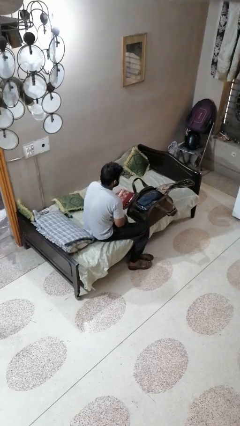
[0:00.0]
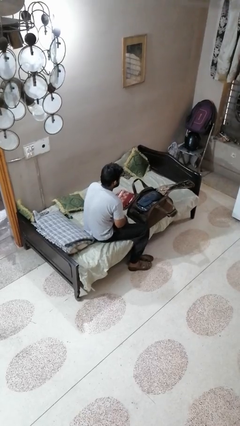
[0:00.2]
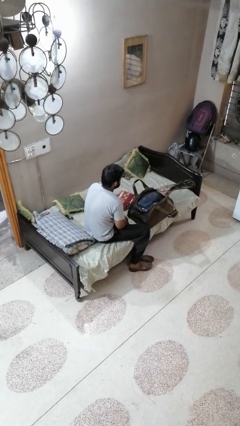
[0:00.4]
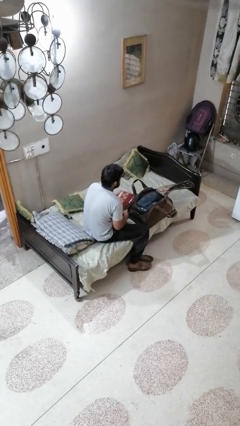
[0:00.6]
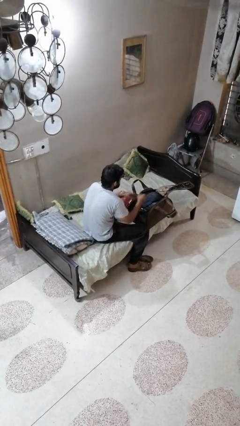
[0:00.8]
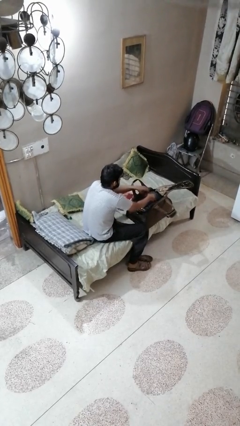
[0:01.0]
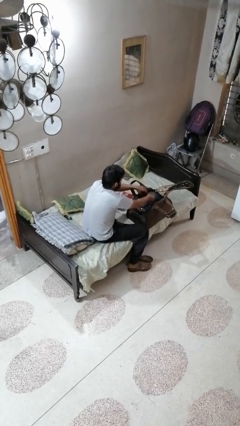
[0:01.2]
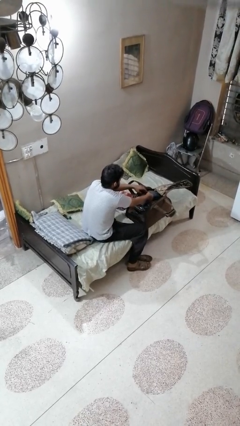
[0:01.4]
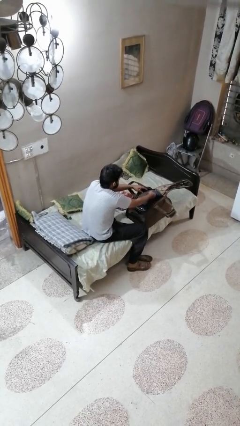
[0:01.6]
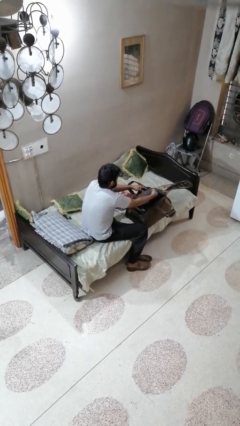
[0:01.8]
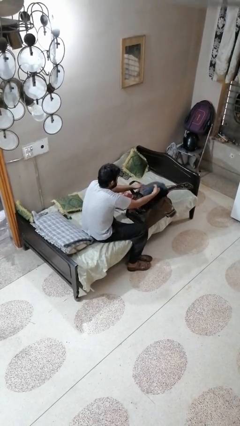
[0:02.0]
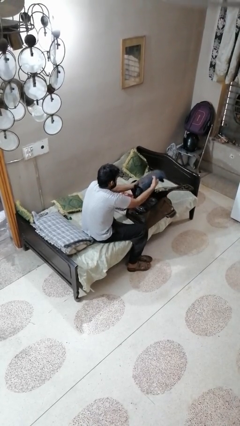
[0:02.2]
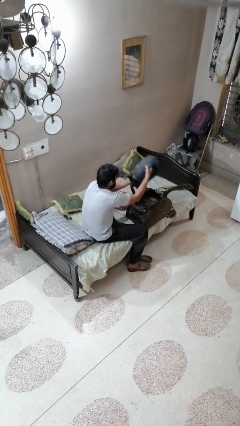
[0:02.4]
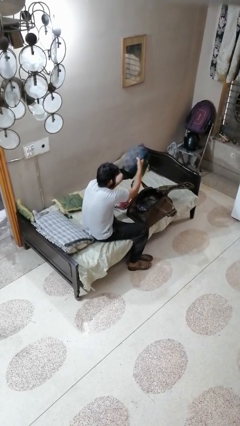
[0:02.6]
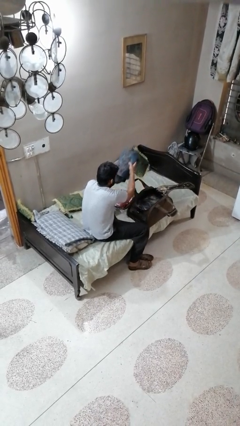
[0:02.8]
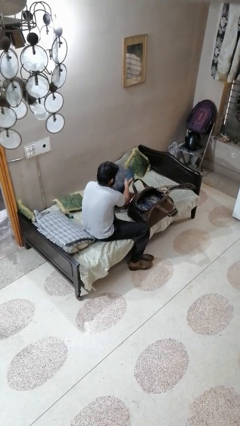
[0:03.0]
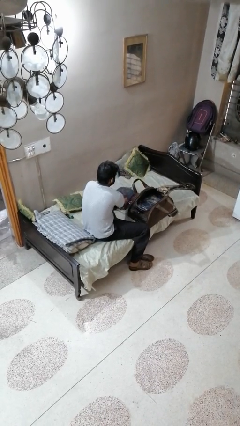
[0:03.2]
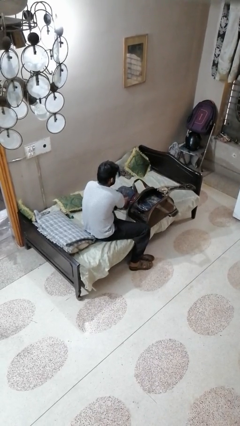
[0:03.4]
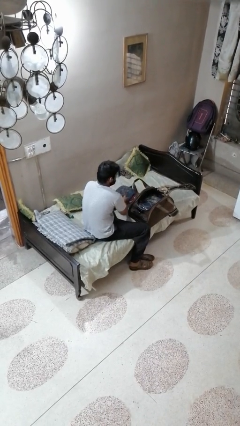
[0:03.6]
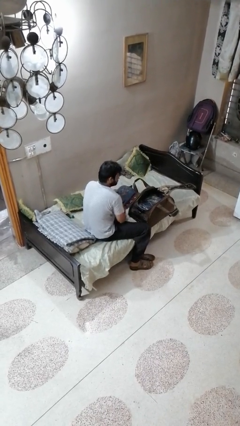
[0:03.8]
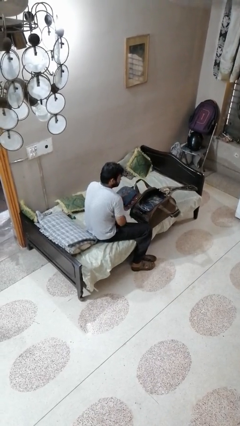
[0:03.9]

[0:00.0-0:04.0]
person unloads clothes from suitcase

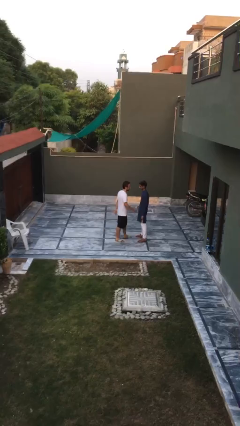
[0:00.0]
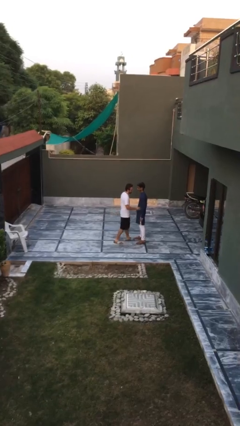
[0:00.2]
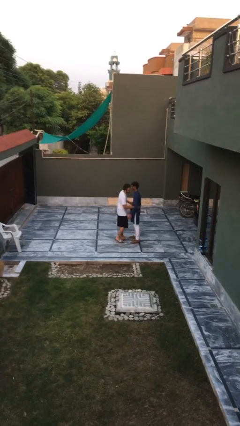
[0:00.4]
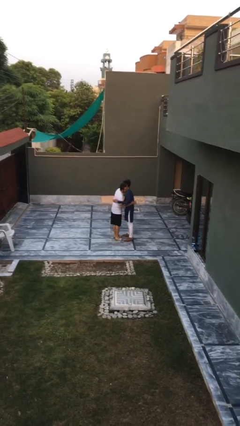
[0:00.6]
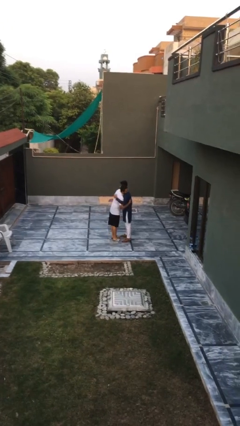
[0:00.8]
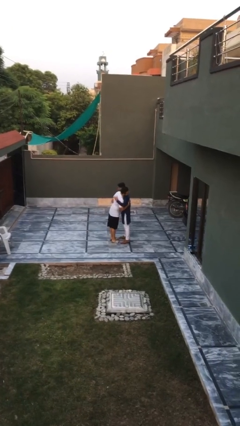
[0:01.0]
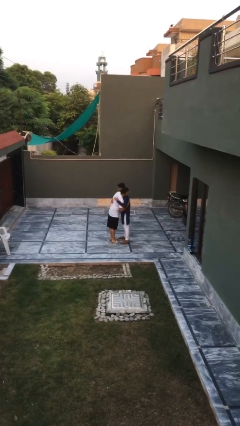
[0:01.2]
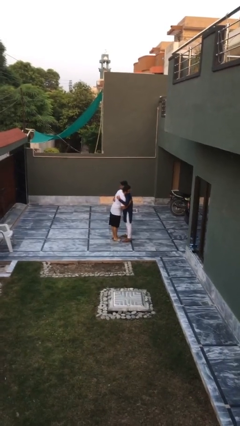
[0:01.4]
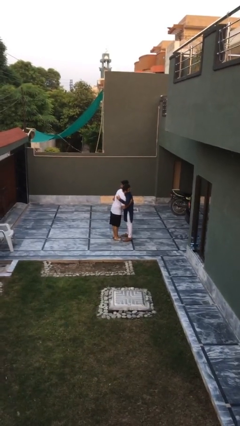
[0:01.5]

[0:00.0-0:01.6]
person embraces person

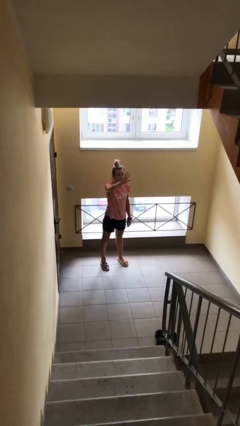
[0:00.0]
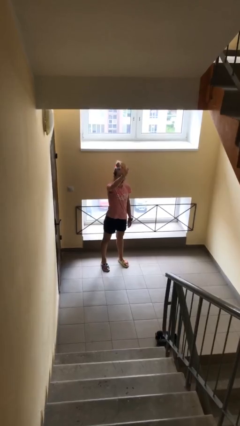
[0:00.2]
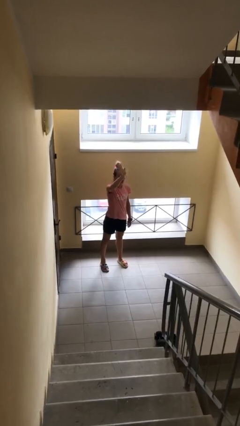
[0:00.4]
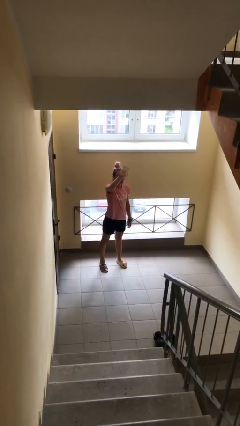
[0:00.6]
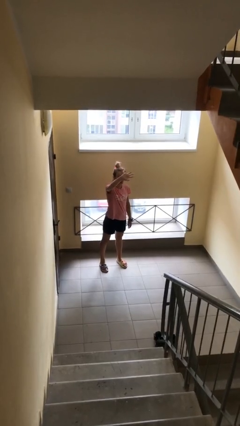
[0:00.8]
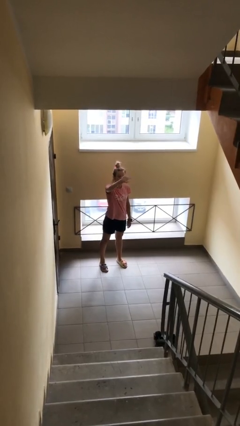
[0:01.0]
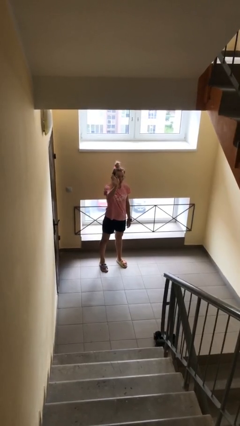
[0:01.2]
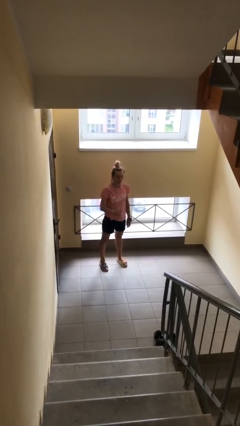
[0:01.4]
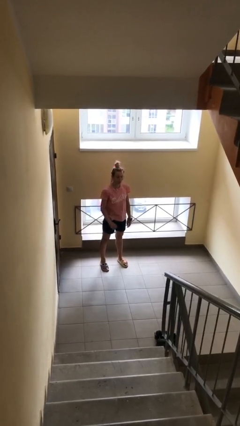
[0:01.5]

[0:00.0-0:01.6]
person waves at person

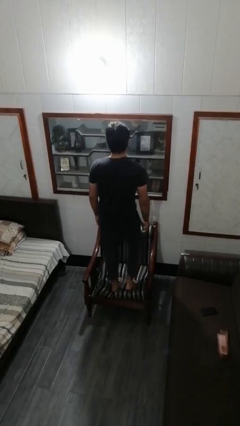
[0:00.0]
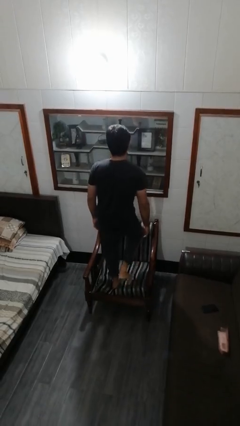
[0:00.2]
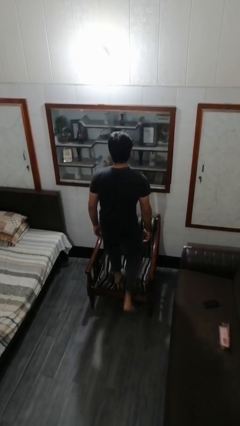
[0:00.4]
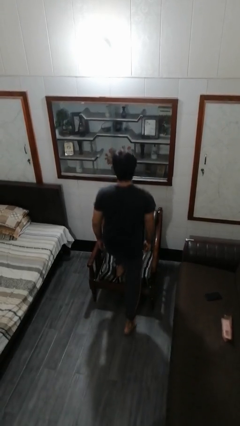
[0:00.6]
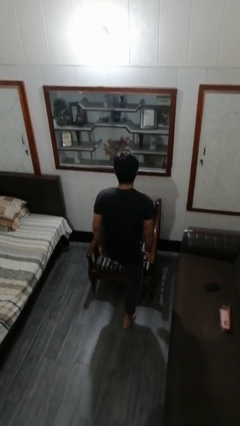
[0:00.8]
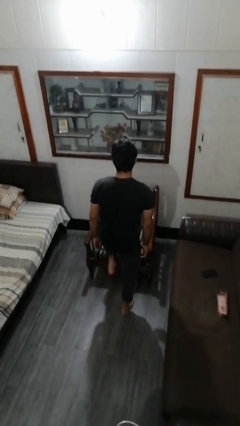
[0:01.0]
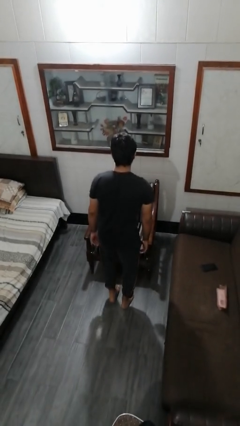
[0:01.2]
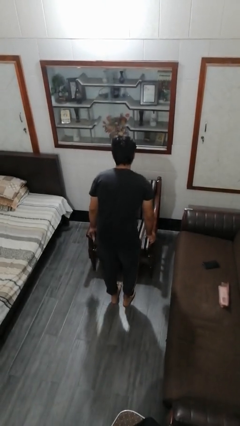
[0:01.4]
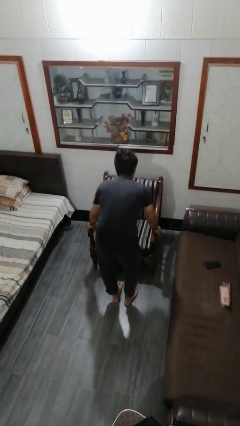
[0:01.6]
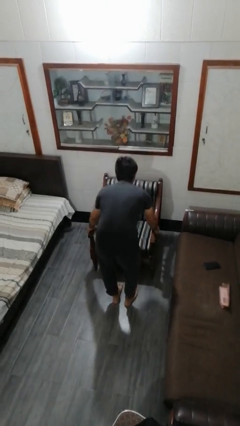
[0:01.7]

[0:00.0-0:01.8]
person climbs off chair

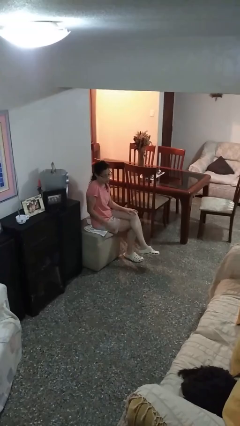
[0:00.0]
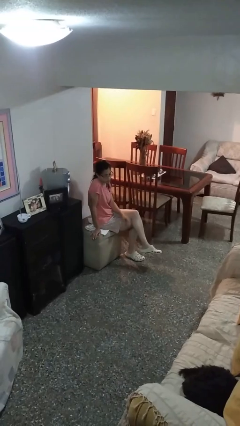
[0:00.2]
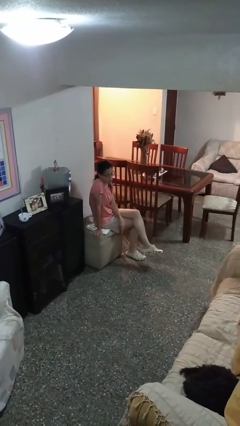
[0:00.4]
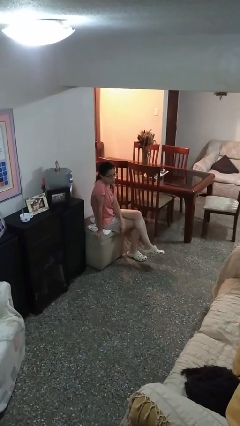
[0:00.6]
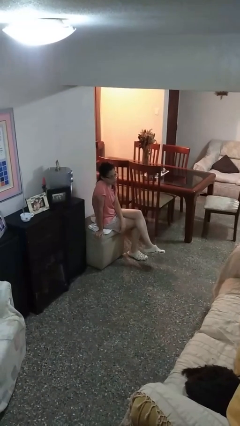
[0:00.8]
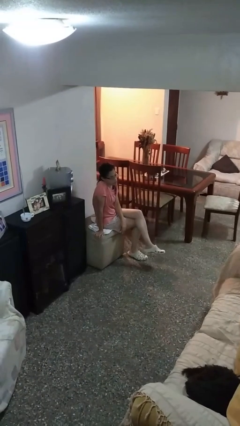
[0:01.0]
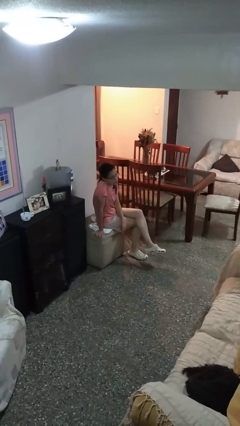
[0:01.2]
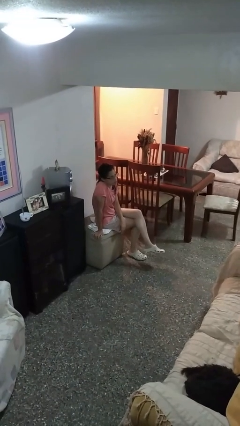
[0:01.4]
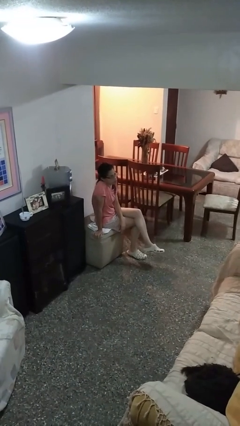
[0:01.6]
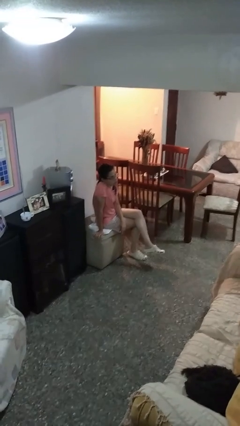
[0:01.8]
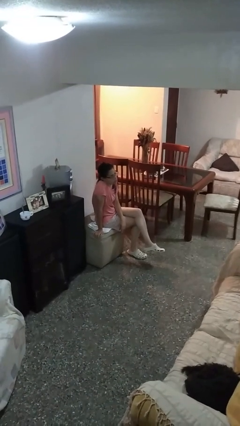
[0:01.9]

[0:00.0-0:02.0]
person strokes chin

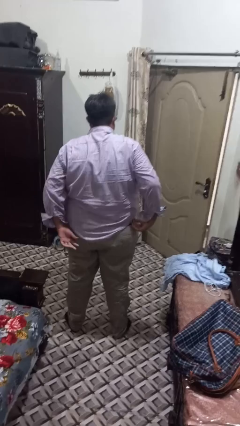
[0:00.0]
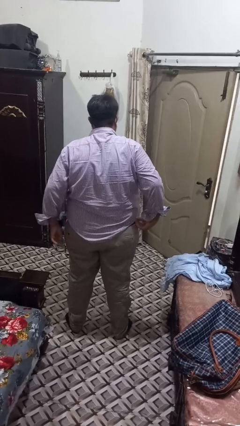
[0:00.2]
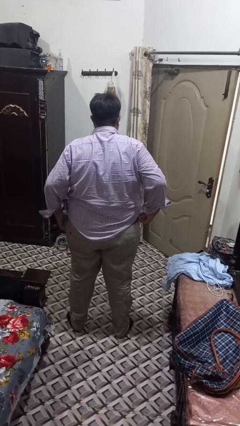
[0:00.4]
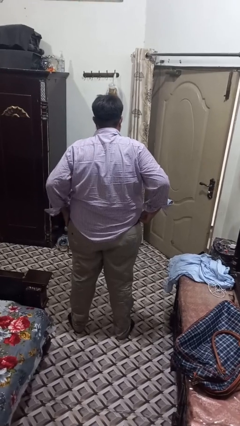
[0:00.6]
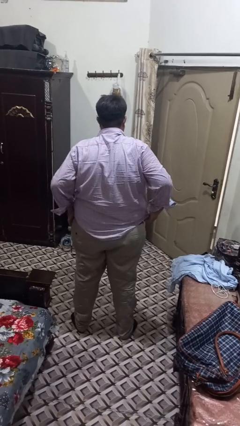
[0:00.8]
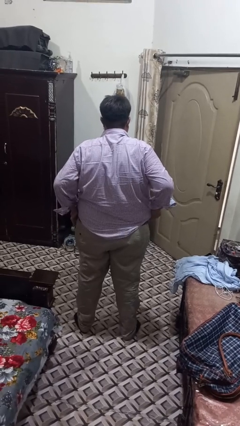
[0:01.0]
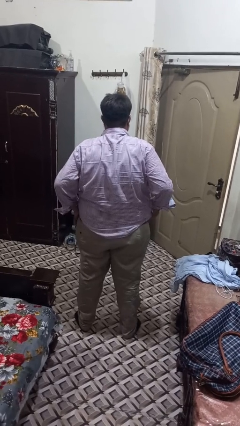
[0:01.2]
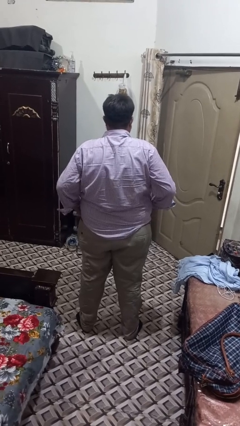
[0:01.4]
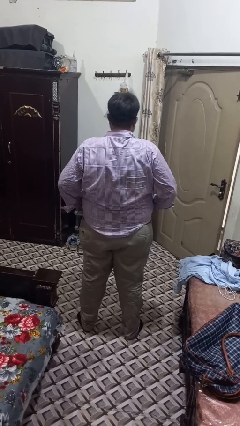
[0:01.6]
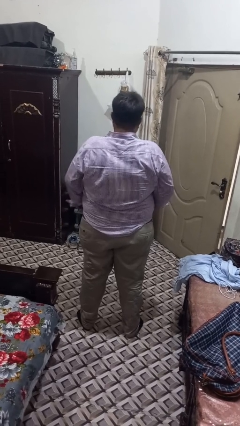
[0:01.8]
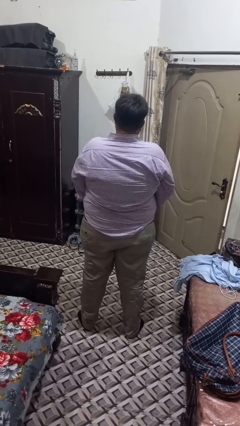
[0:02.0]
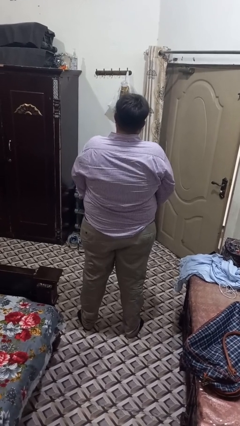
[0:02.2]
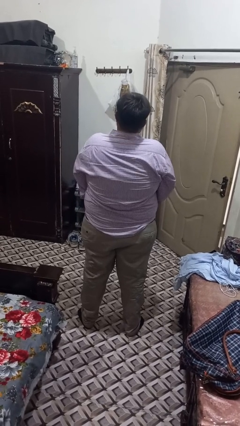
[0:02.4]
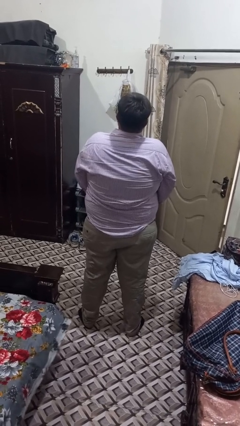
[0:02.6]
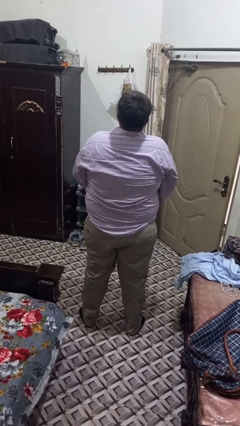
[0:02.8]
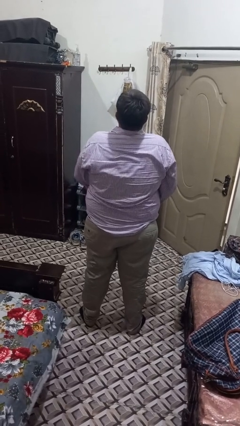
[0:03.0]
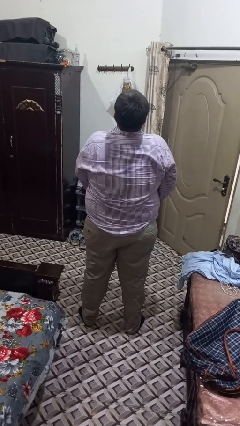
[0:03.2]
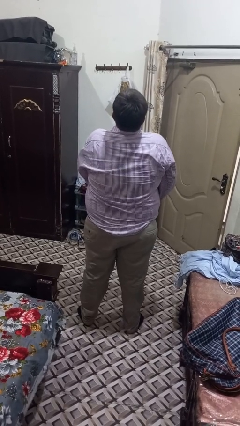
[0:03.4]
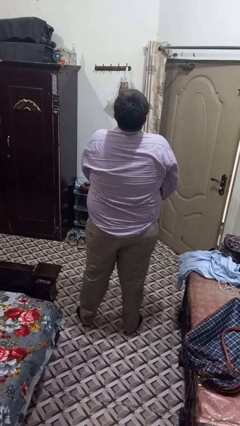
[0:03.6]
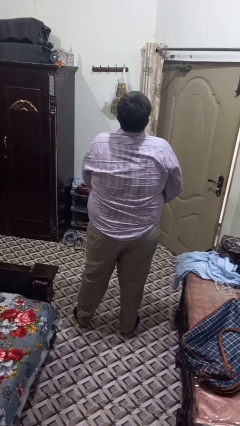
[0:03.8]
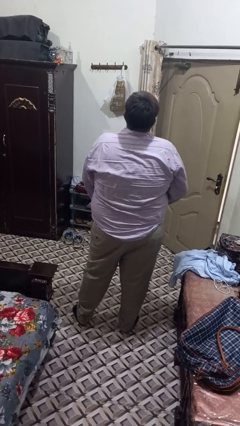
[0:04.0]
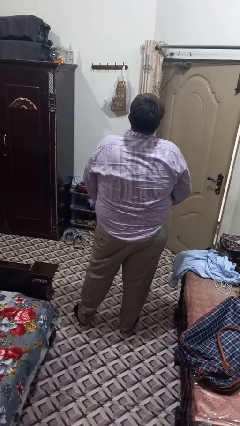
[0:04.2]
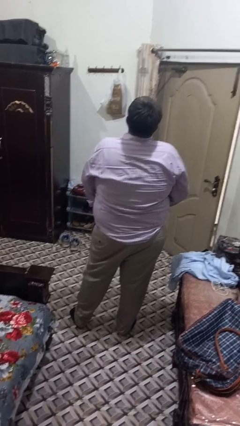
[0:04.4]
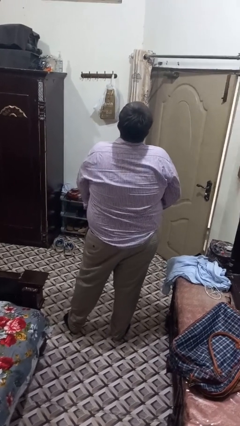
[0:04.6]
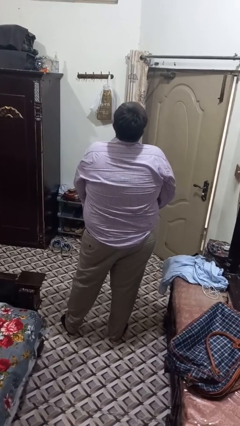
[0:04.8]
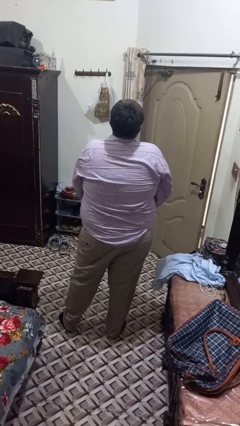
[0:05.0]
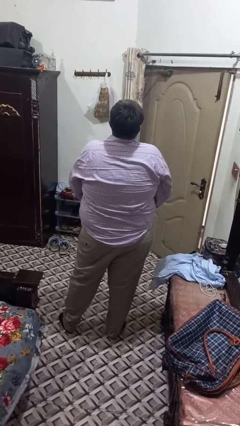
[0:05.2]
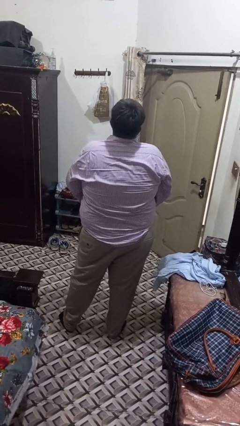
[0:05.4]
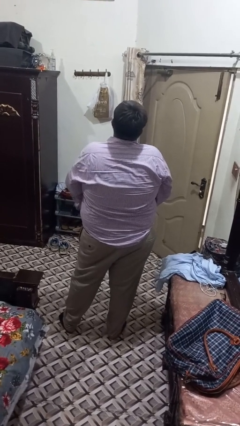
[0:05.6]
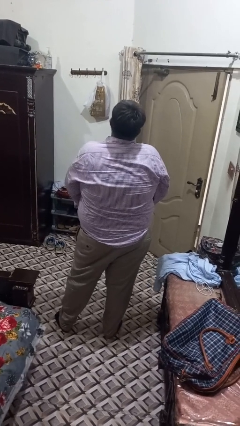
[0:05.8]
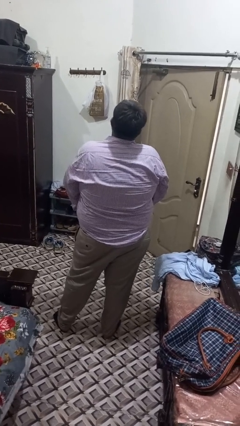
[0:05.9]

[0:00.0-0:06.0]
person tucks in shirt
